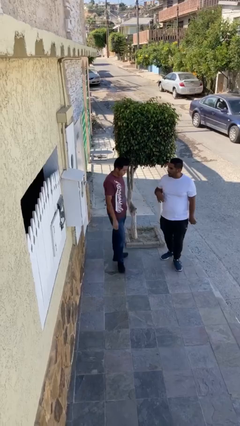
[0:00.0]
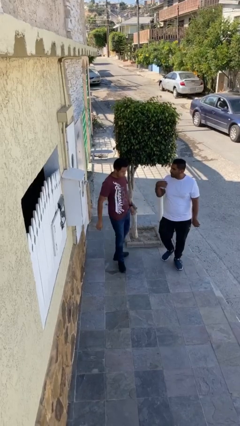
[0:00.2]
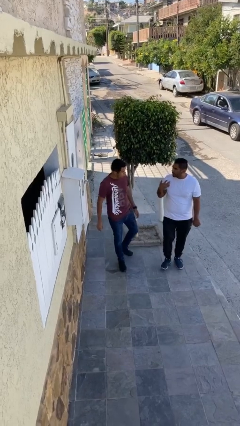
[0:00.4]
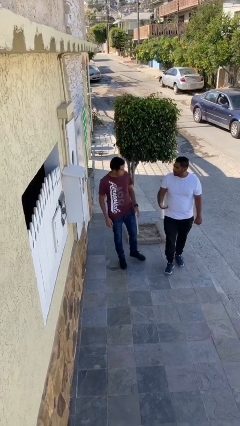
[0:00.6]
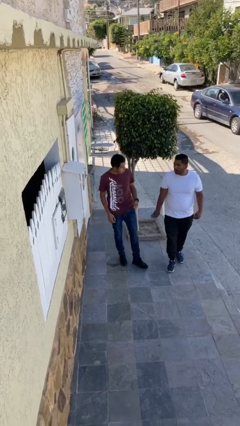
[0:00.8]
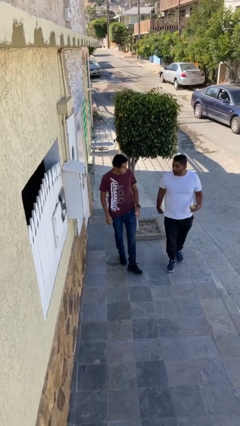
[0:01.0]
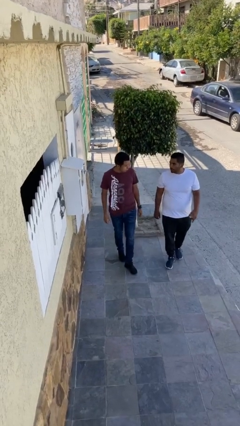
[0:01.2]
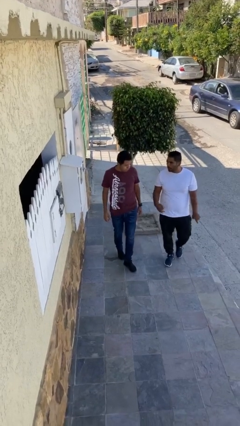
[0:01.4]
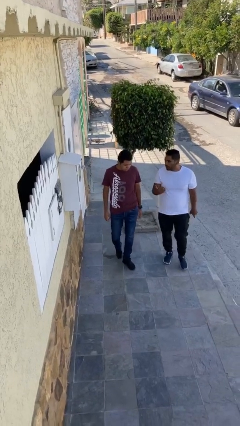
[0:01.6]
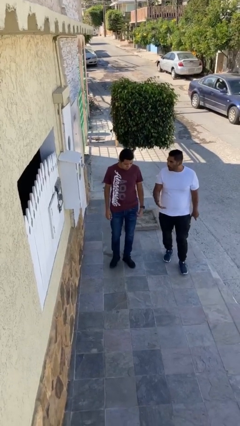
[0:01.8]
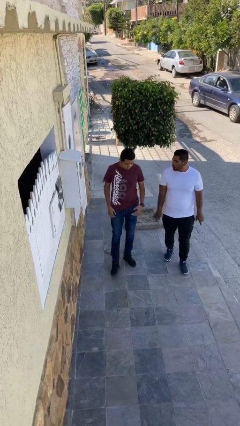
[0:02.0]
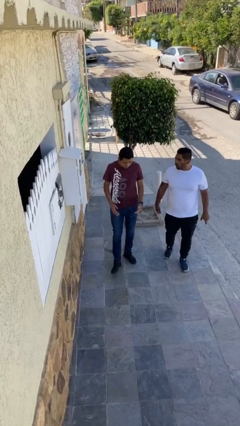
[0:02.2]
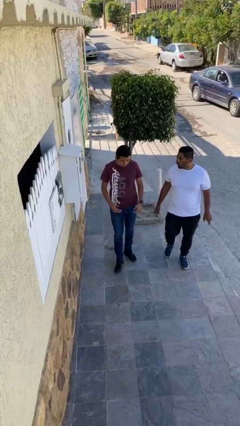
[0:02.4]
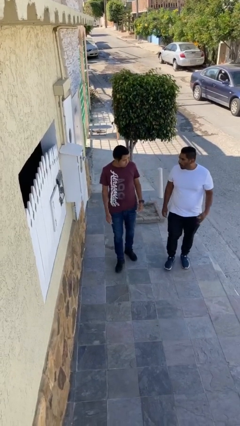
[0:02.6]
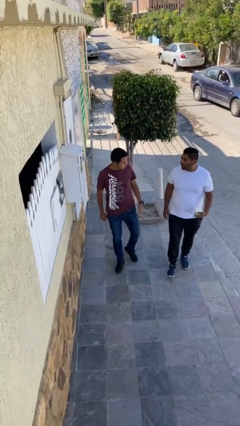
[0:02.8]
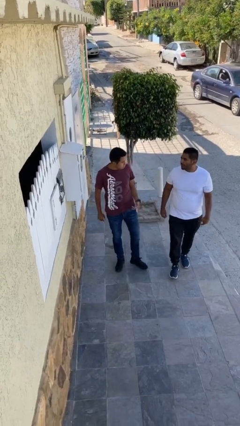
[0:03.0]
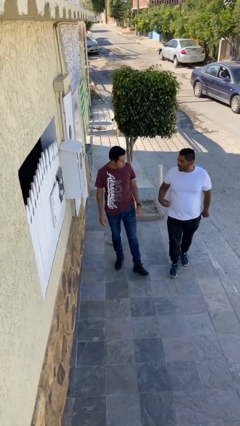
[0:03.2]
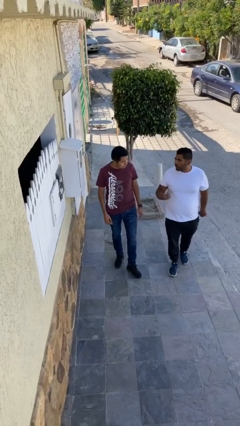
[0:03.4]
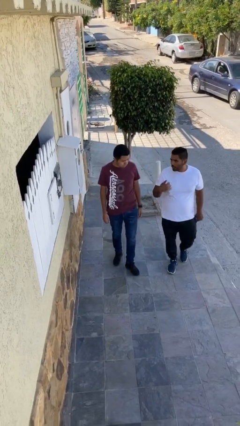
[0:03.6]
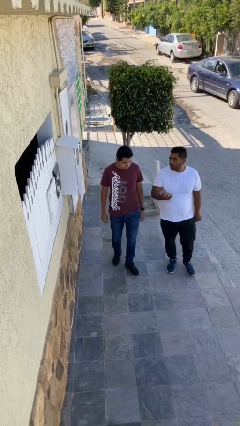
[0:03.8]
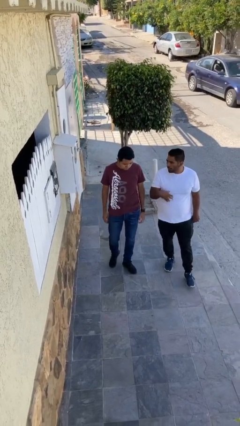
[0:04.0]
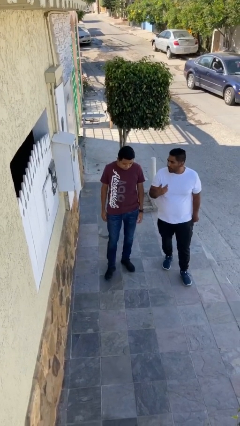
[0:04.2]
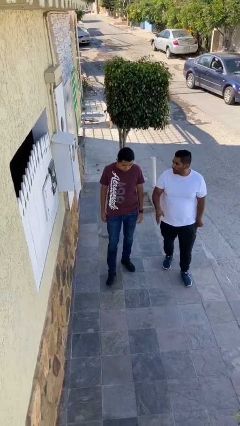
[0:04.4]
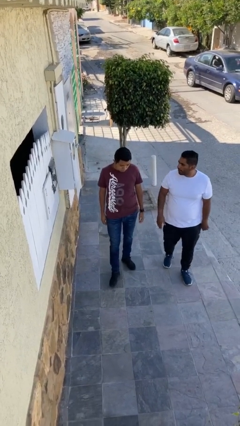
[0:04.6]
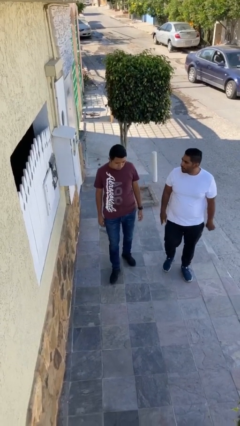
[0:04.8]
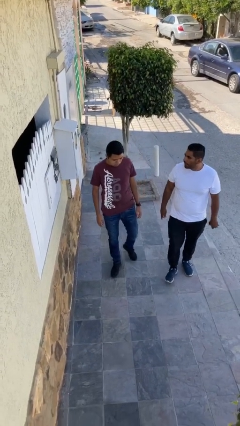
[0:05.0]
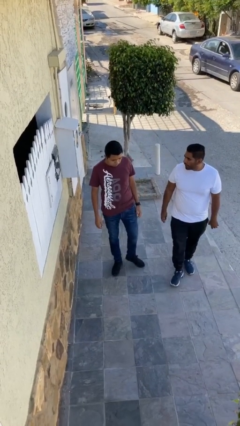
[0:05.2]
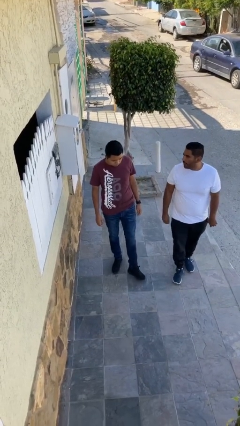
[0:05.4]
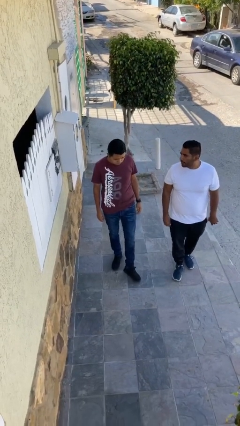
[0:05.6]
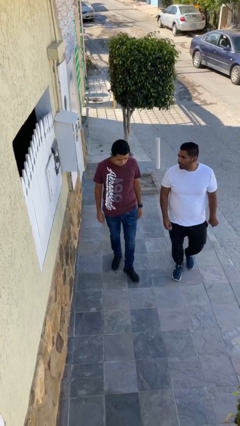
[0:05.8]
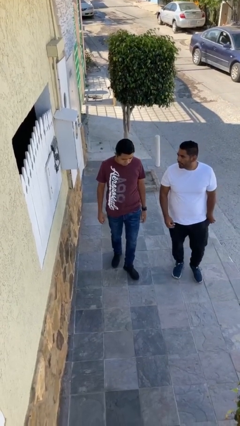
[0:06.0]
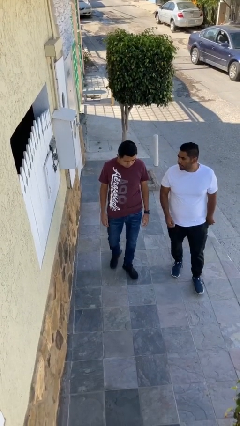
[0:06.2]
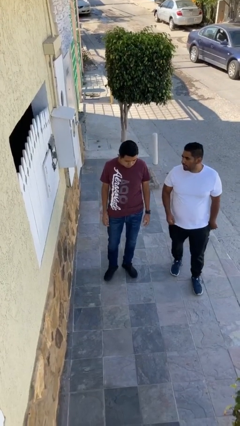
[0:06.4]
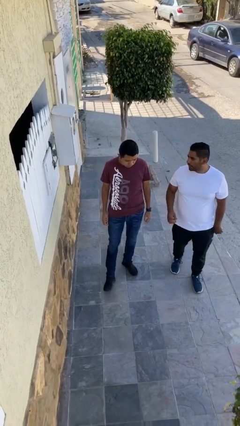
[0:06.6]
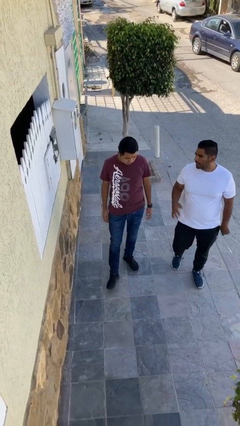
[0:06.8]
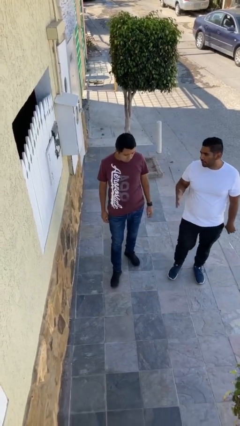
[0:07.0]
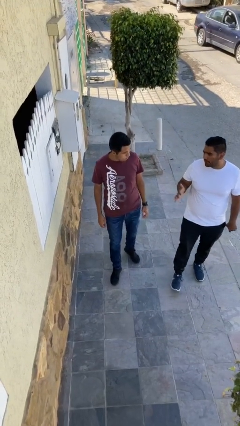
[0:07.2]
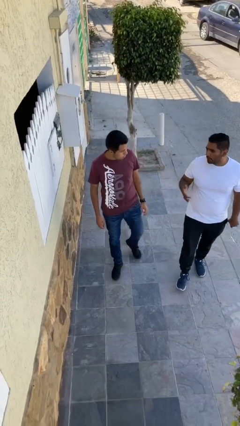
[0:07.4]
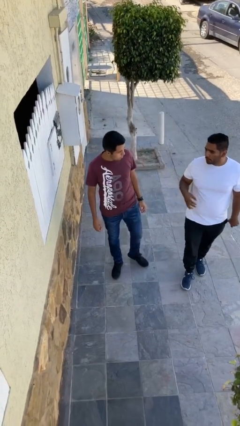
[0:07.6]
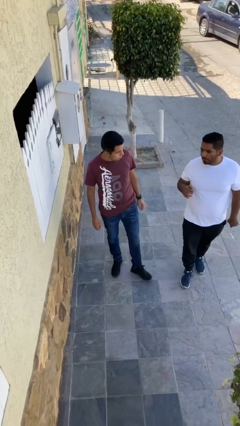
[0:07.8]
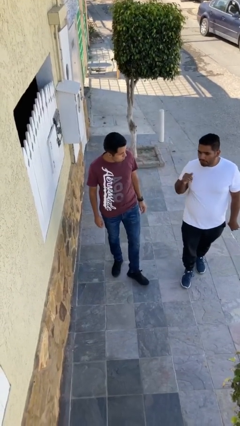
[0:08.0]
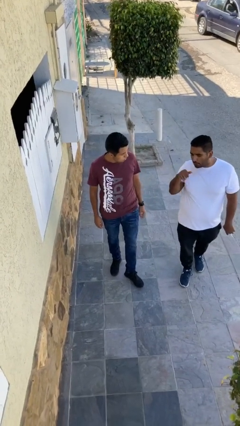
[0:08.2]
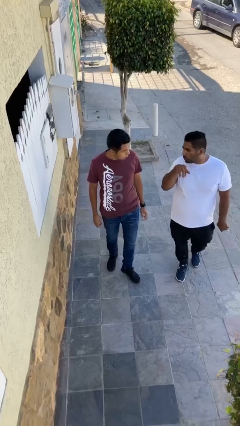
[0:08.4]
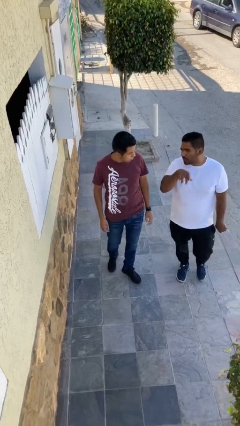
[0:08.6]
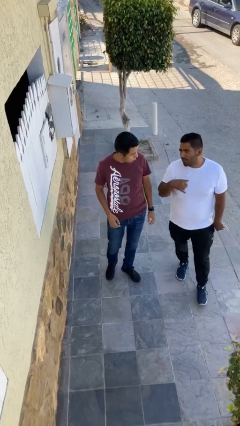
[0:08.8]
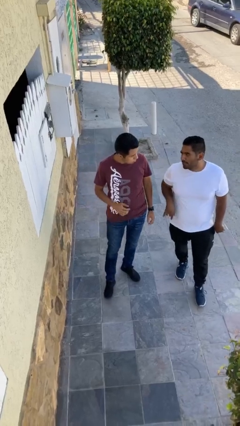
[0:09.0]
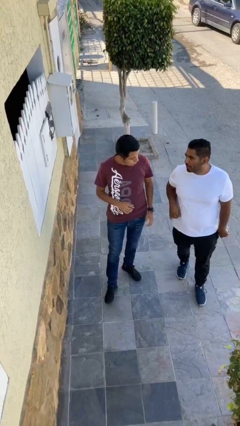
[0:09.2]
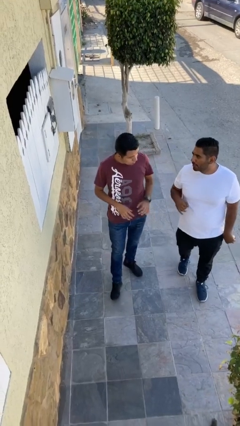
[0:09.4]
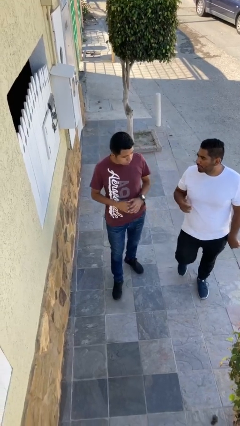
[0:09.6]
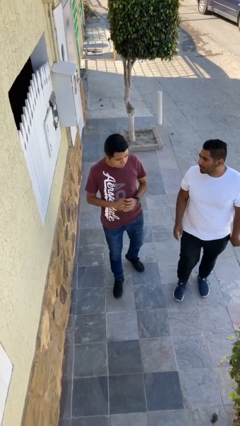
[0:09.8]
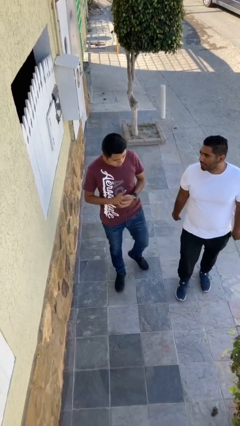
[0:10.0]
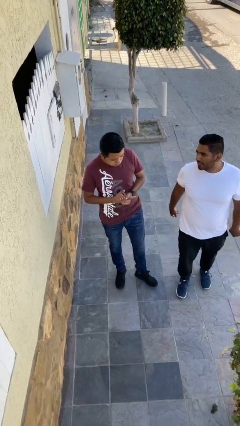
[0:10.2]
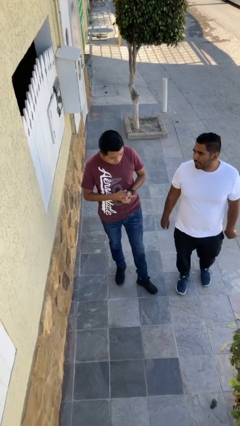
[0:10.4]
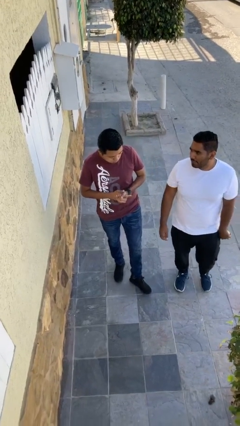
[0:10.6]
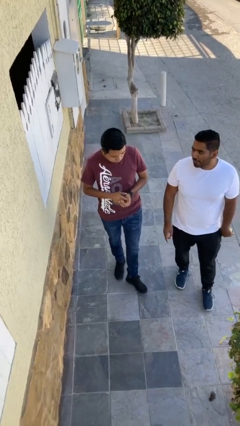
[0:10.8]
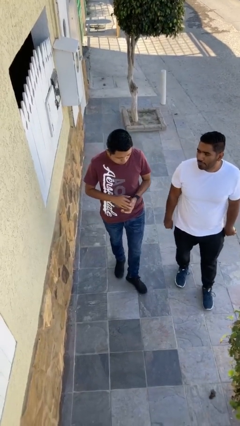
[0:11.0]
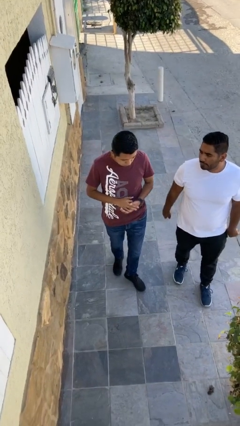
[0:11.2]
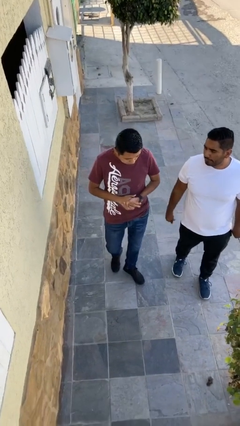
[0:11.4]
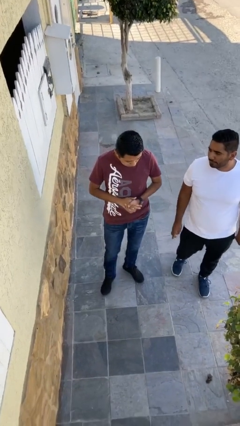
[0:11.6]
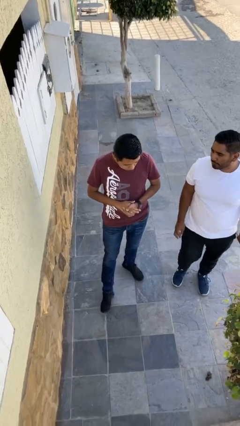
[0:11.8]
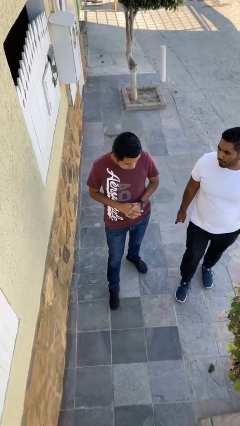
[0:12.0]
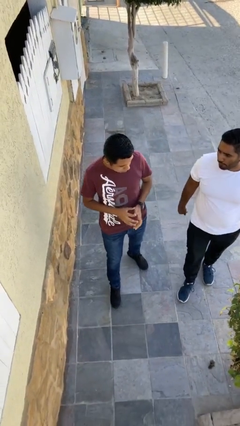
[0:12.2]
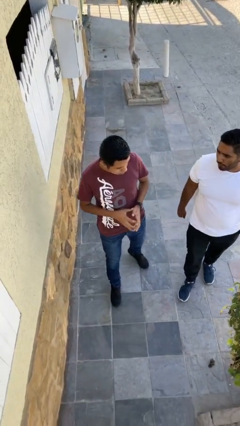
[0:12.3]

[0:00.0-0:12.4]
person talks to person

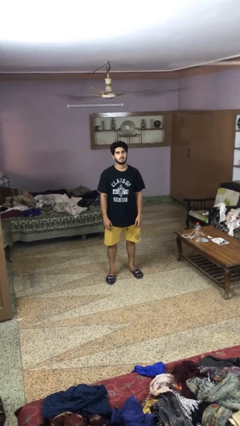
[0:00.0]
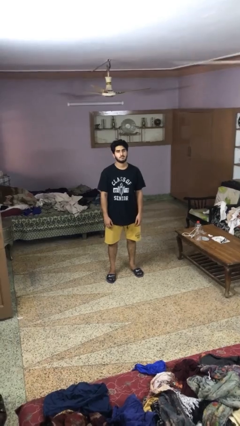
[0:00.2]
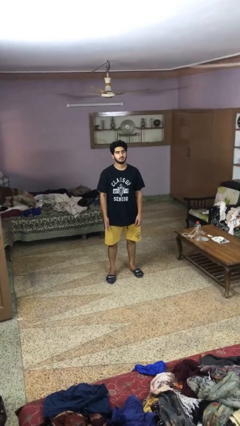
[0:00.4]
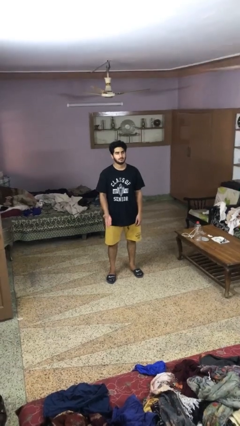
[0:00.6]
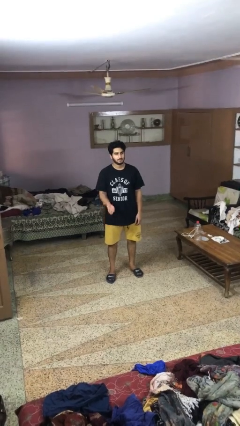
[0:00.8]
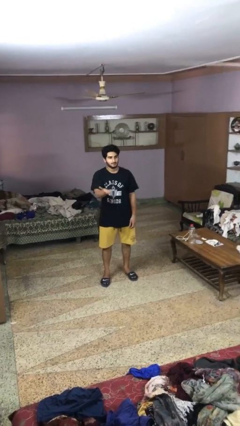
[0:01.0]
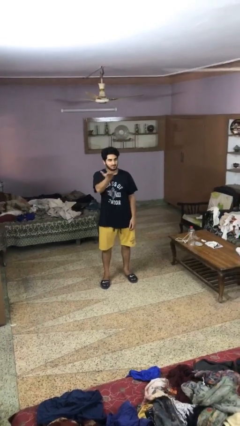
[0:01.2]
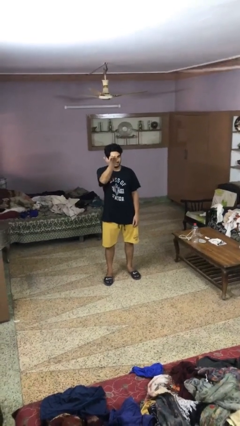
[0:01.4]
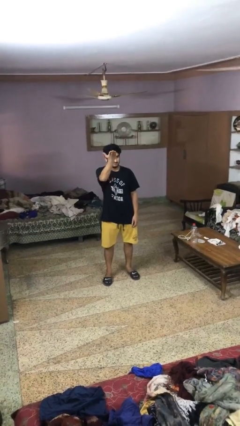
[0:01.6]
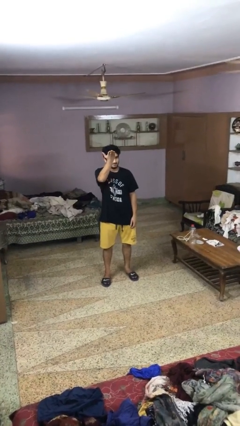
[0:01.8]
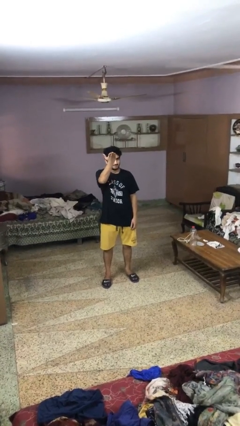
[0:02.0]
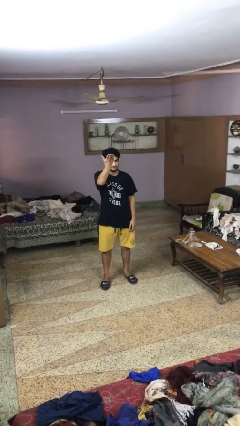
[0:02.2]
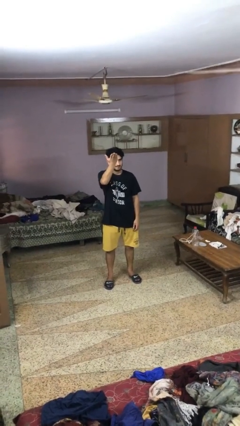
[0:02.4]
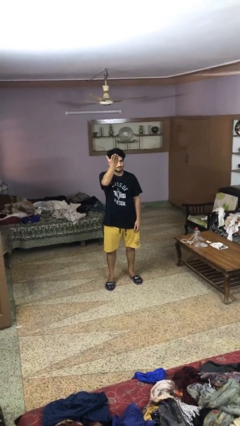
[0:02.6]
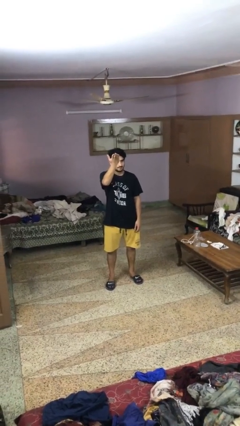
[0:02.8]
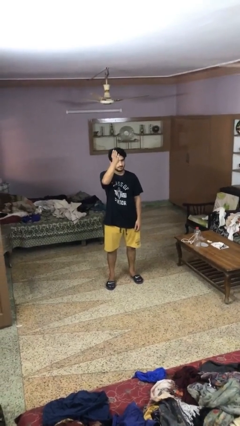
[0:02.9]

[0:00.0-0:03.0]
person gestures swipe up

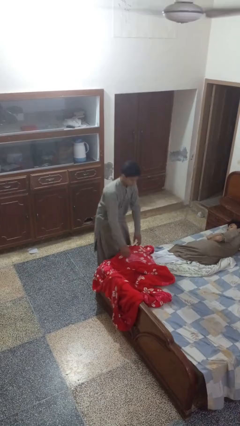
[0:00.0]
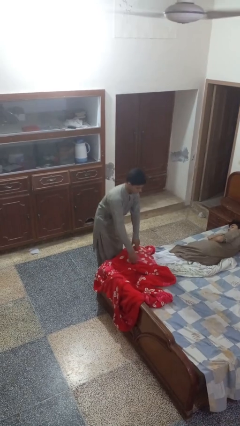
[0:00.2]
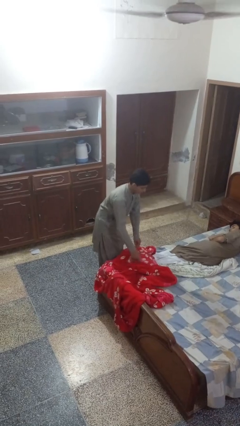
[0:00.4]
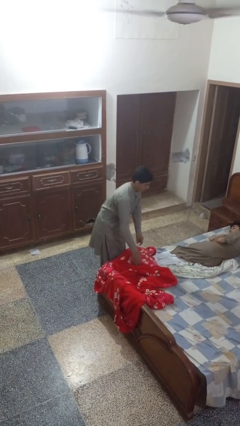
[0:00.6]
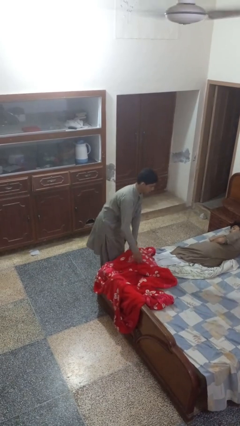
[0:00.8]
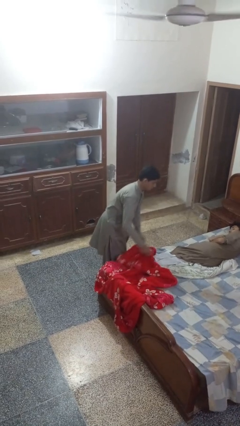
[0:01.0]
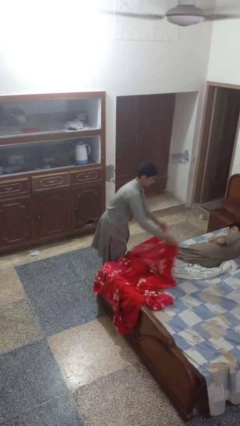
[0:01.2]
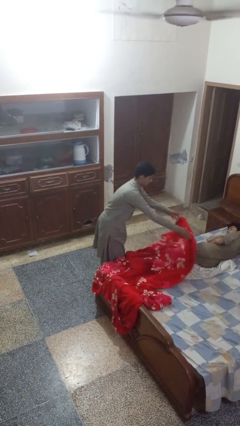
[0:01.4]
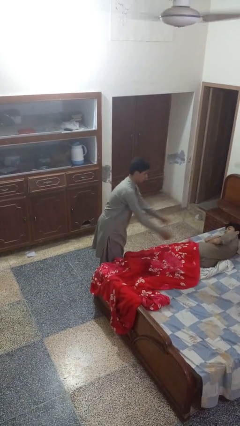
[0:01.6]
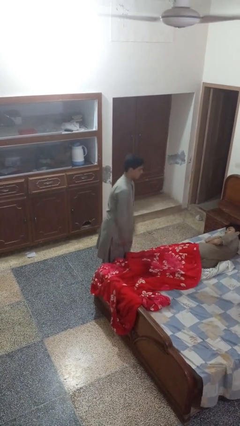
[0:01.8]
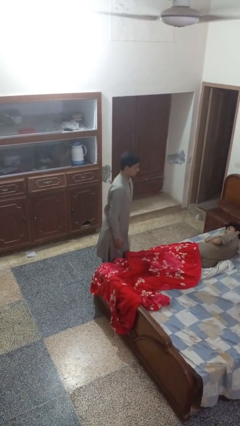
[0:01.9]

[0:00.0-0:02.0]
person covers friend with blanket

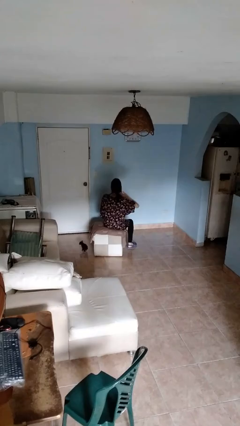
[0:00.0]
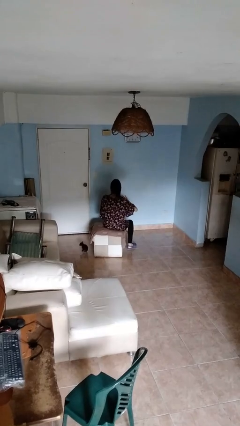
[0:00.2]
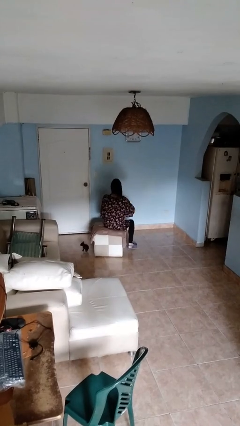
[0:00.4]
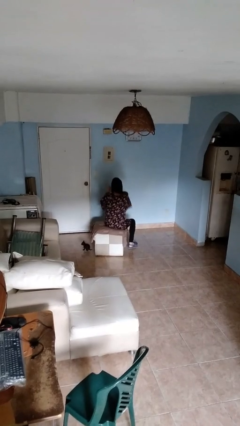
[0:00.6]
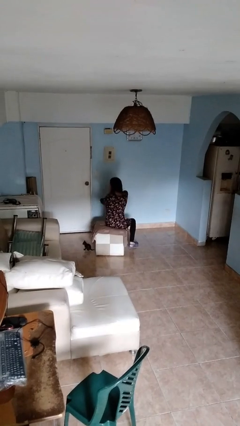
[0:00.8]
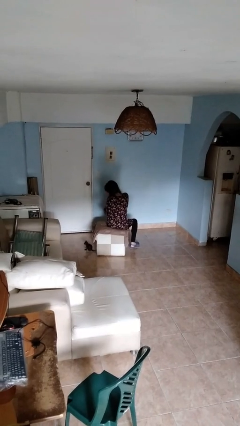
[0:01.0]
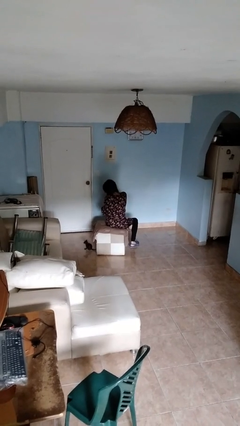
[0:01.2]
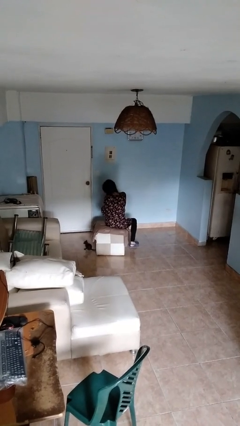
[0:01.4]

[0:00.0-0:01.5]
person sneezes into hand
